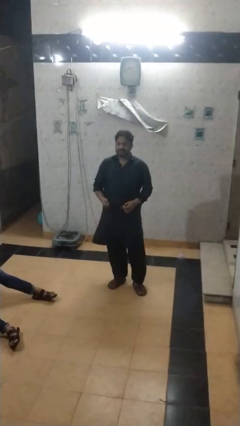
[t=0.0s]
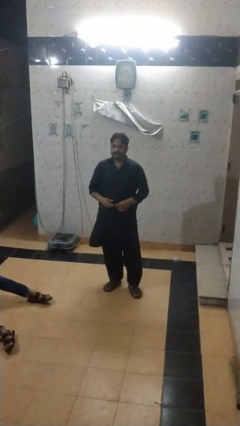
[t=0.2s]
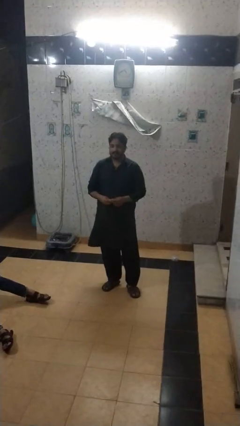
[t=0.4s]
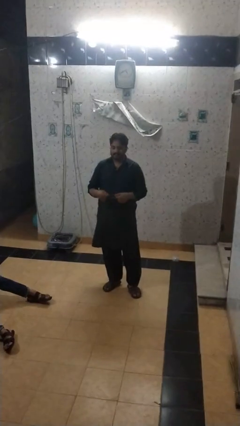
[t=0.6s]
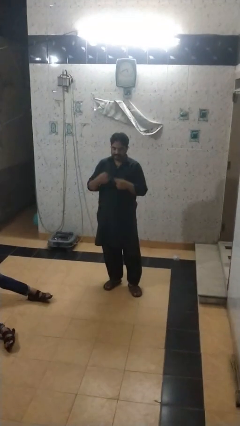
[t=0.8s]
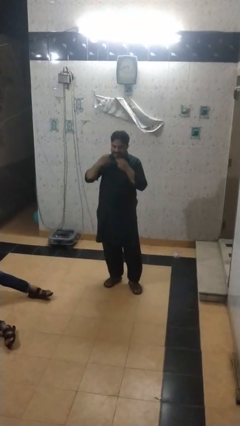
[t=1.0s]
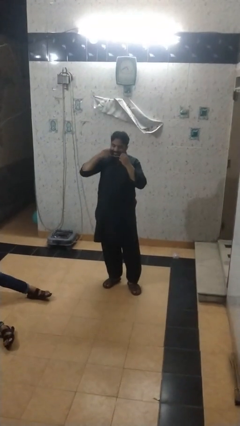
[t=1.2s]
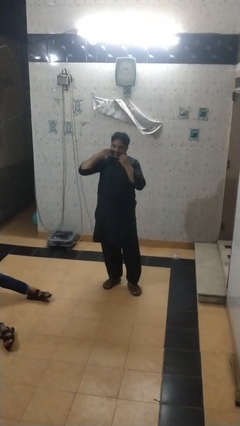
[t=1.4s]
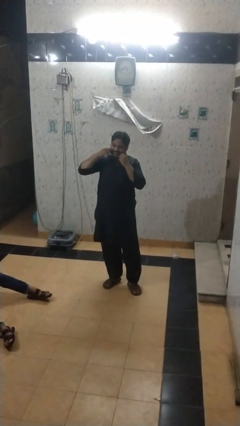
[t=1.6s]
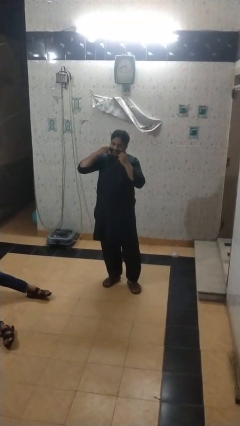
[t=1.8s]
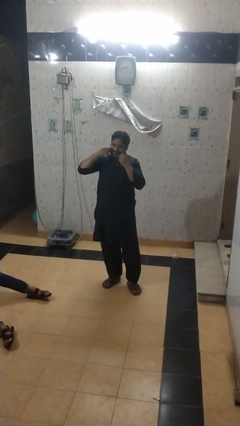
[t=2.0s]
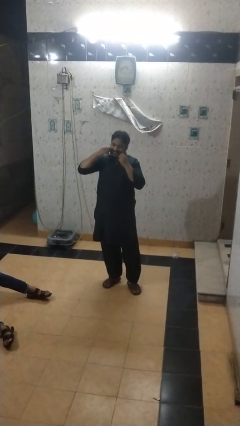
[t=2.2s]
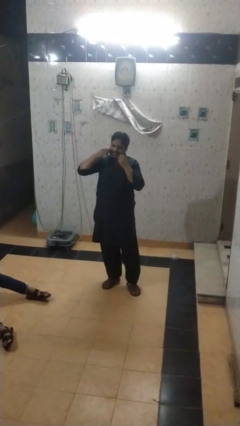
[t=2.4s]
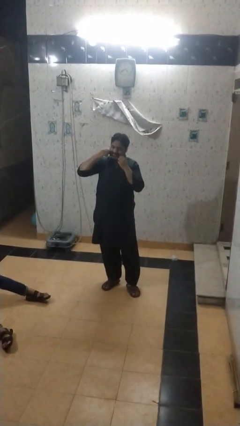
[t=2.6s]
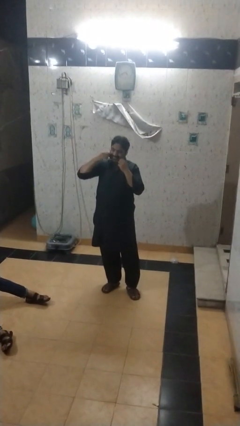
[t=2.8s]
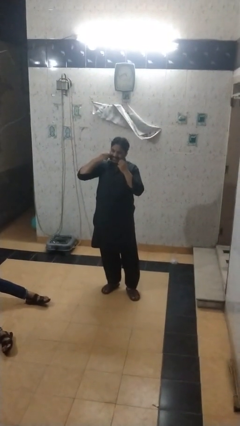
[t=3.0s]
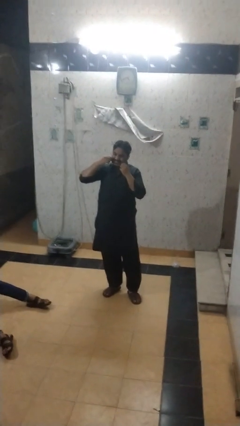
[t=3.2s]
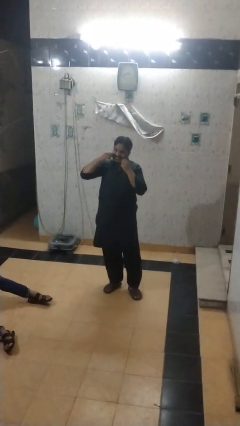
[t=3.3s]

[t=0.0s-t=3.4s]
person flosses

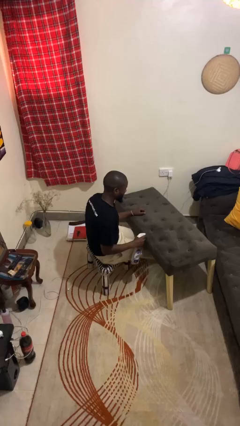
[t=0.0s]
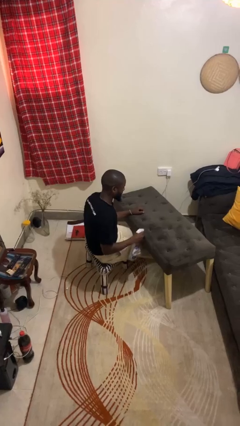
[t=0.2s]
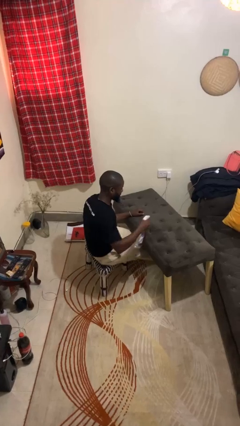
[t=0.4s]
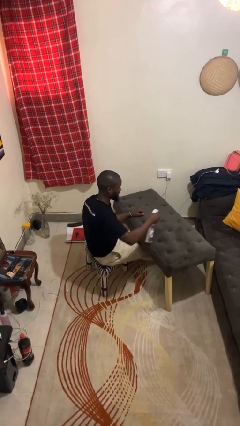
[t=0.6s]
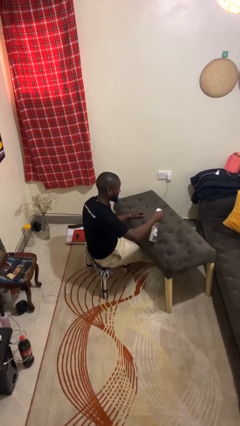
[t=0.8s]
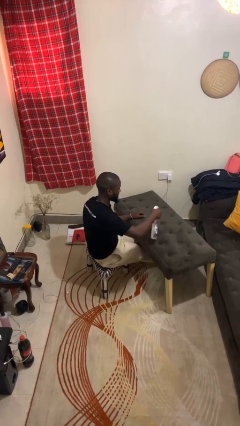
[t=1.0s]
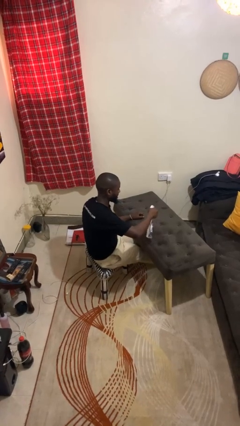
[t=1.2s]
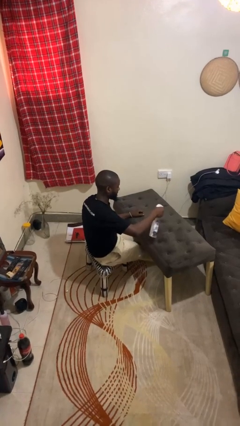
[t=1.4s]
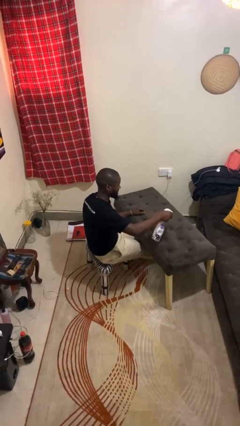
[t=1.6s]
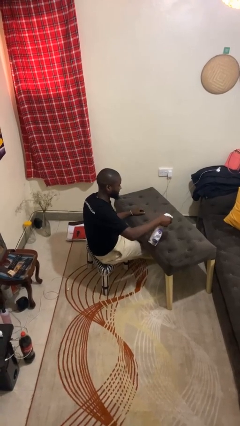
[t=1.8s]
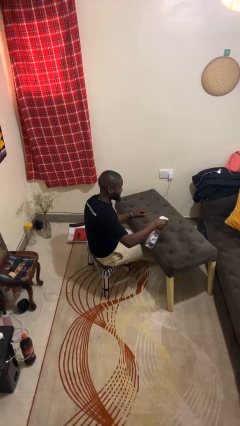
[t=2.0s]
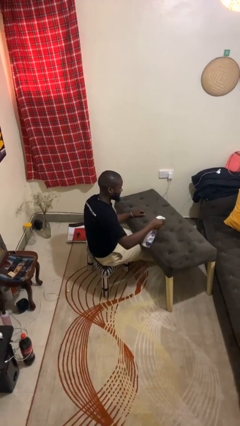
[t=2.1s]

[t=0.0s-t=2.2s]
person sprays from bottle

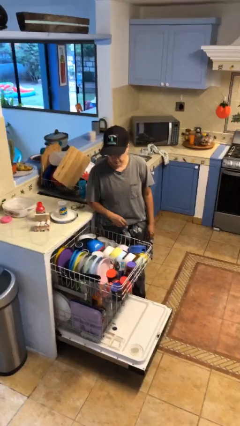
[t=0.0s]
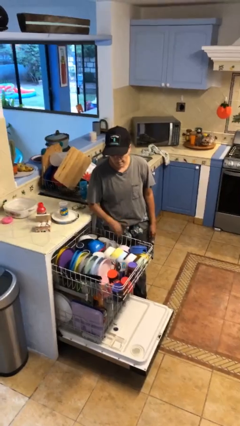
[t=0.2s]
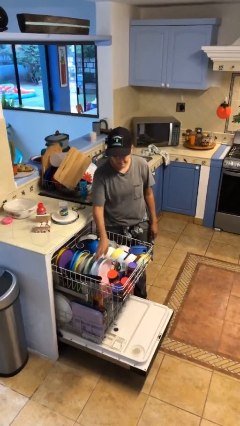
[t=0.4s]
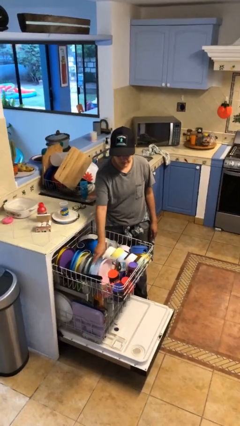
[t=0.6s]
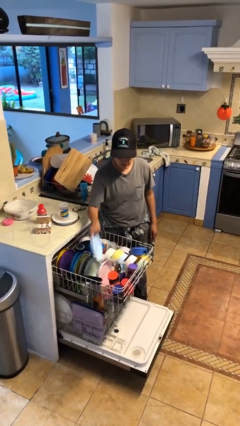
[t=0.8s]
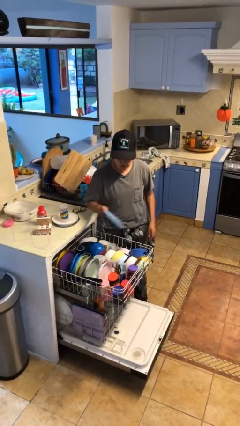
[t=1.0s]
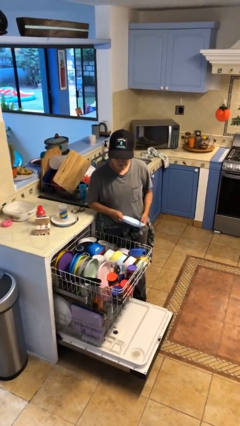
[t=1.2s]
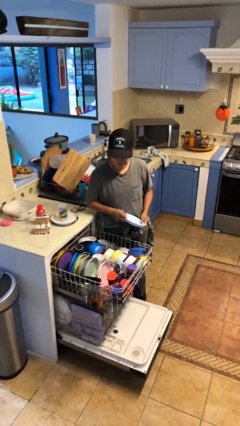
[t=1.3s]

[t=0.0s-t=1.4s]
person unloads dishwasher

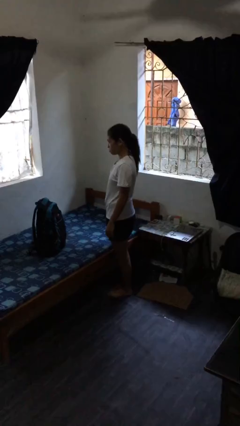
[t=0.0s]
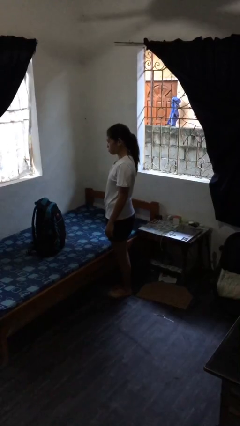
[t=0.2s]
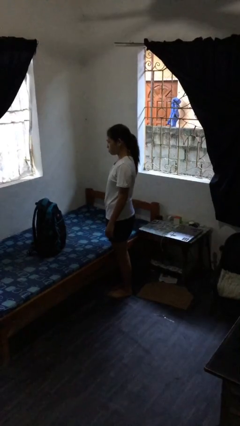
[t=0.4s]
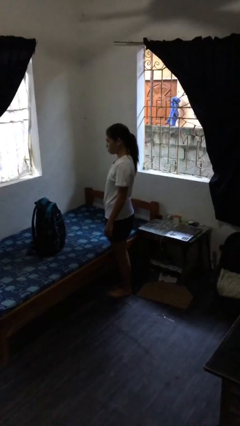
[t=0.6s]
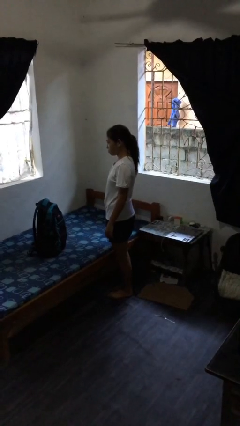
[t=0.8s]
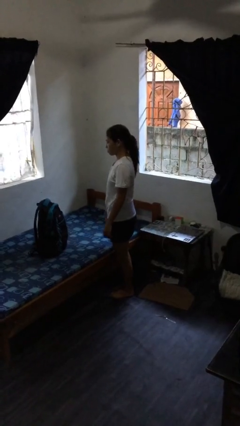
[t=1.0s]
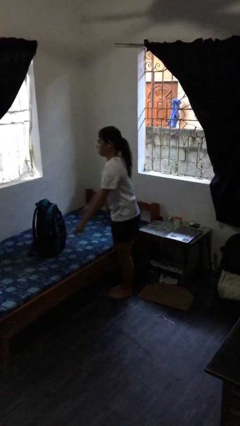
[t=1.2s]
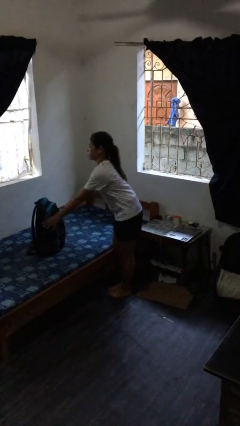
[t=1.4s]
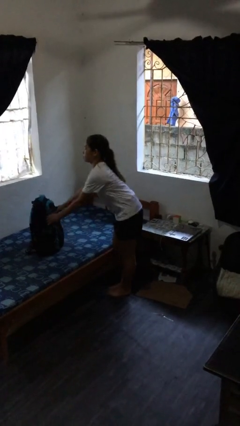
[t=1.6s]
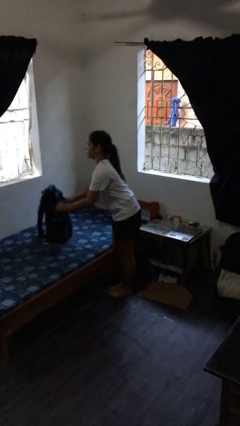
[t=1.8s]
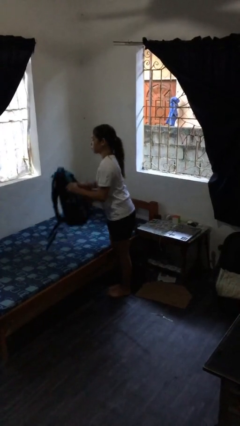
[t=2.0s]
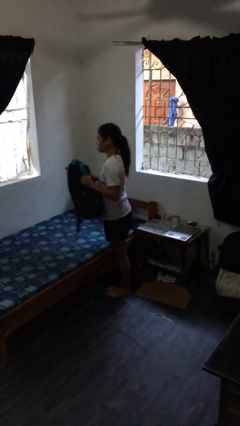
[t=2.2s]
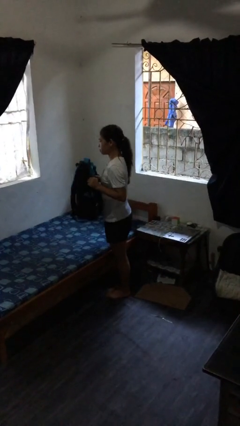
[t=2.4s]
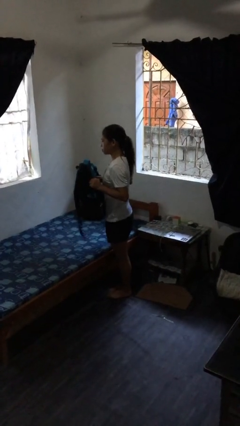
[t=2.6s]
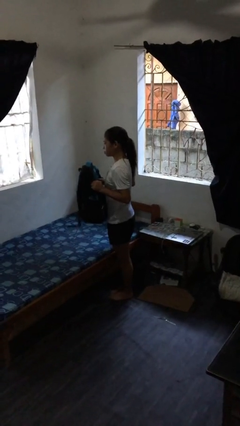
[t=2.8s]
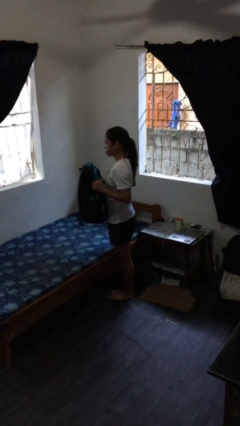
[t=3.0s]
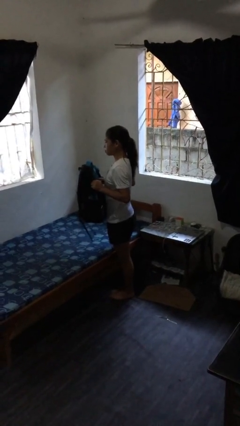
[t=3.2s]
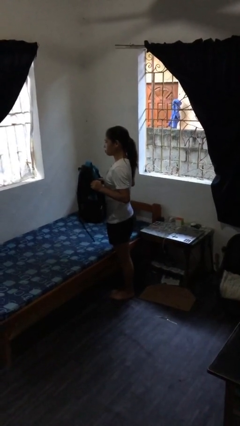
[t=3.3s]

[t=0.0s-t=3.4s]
person picks up object from bed

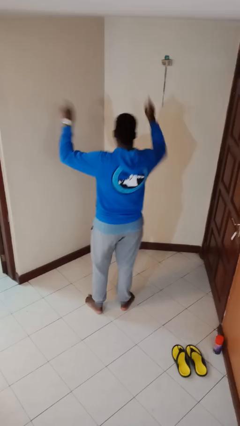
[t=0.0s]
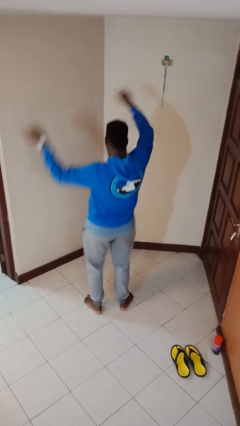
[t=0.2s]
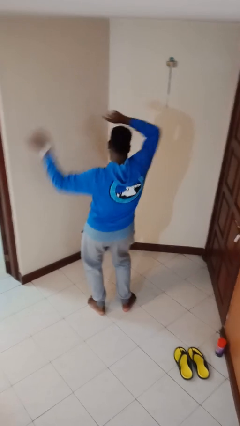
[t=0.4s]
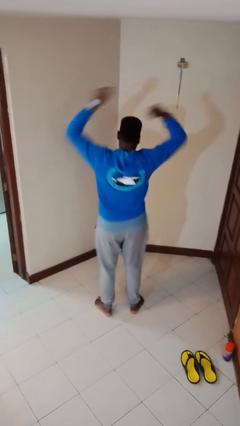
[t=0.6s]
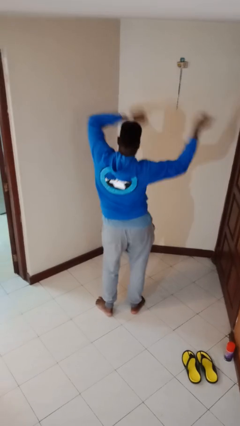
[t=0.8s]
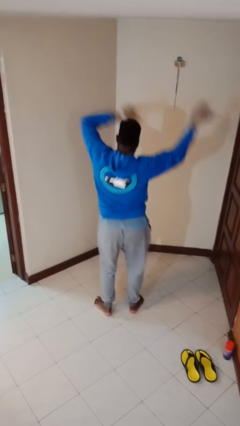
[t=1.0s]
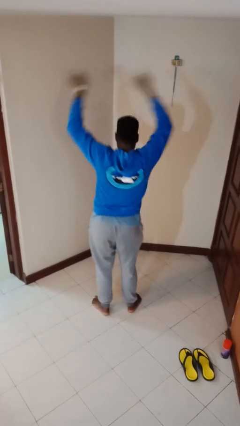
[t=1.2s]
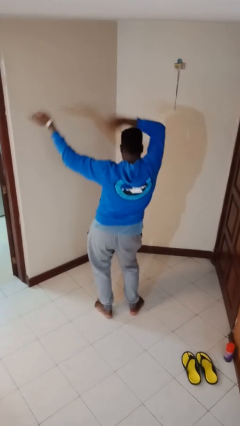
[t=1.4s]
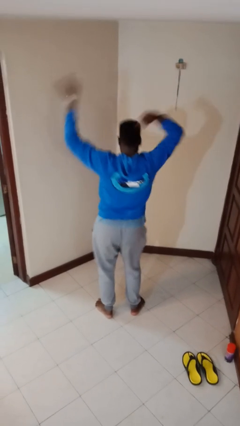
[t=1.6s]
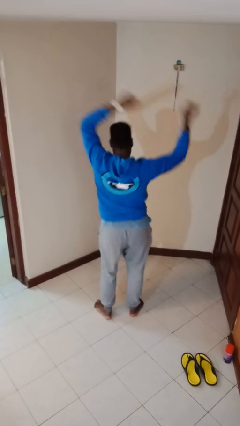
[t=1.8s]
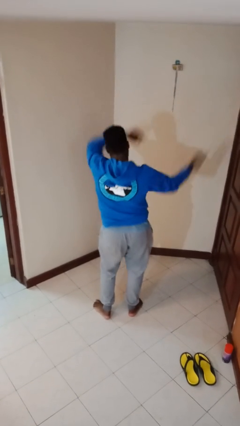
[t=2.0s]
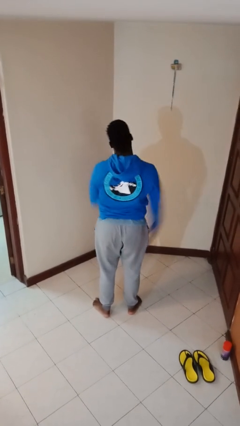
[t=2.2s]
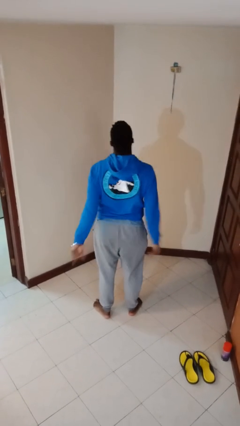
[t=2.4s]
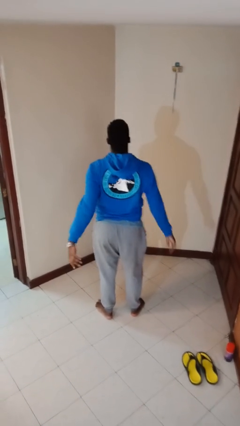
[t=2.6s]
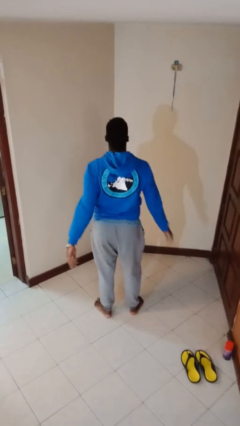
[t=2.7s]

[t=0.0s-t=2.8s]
person dances in place

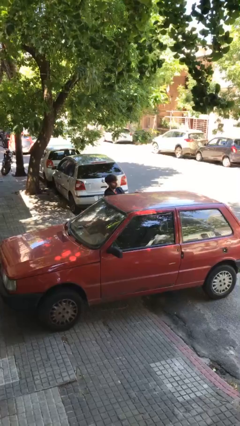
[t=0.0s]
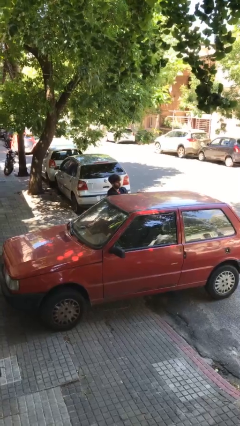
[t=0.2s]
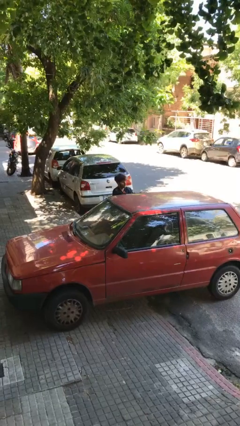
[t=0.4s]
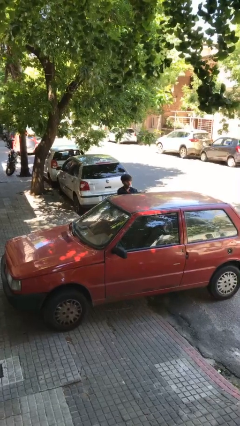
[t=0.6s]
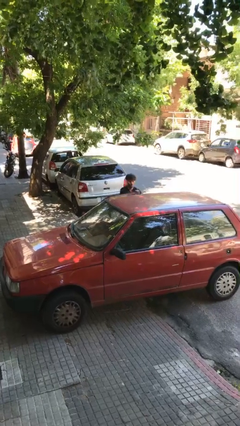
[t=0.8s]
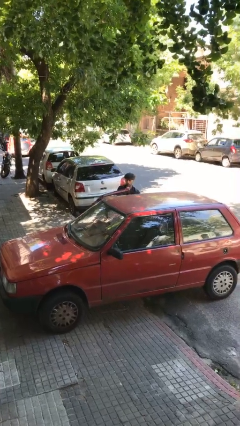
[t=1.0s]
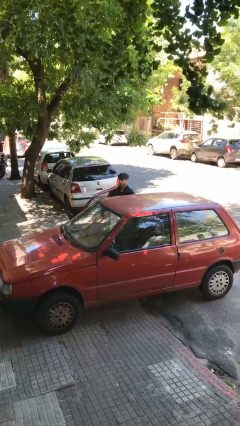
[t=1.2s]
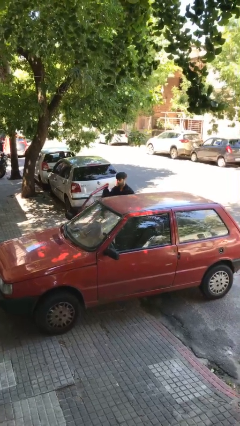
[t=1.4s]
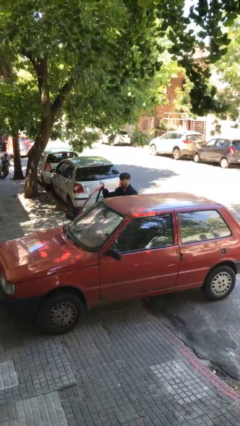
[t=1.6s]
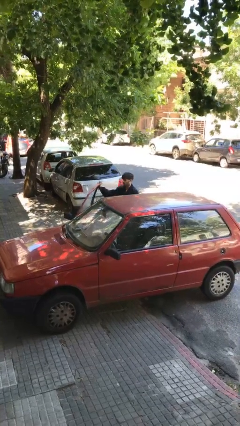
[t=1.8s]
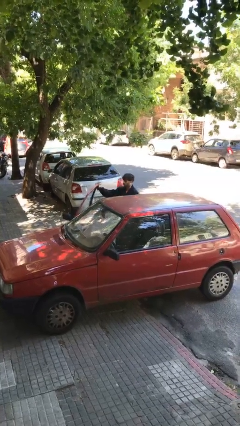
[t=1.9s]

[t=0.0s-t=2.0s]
person opens car door

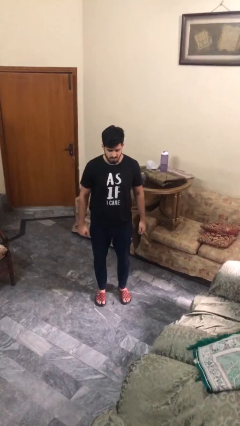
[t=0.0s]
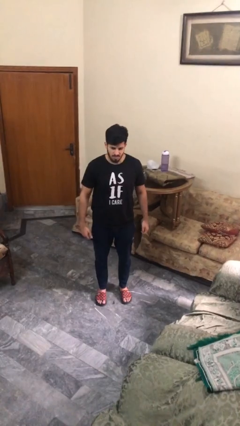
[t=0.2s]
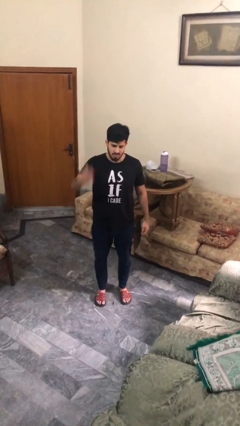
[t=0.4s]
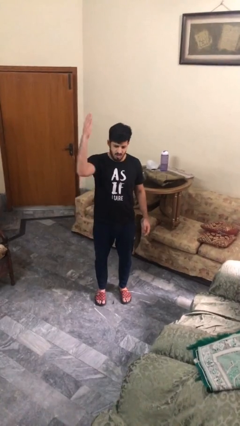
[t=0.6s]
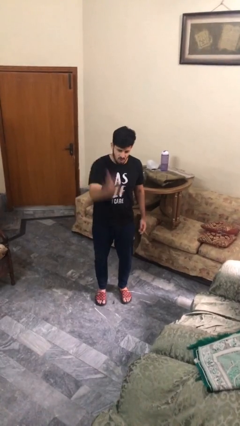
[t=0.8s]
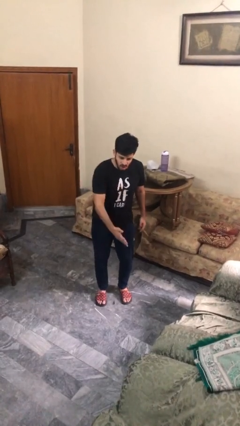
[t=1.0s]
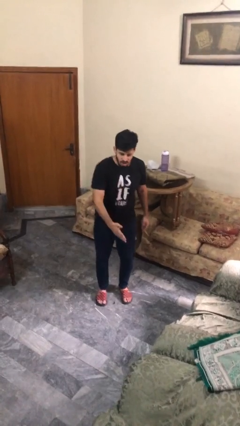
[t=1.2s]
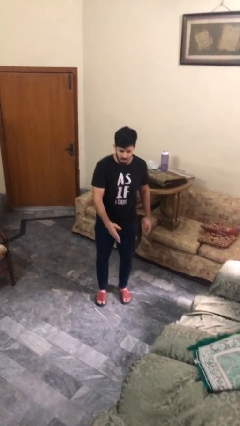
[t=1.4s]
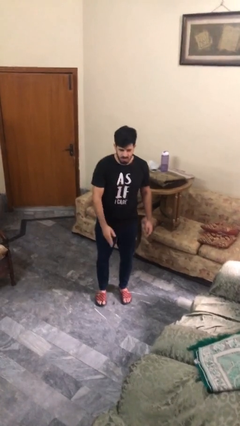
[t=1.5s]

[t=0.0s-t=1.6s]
person karate chop
